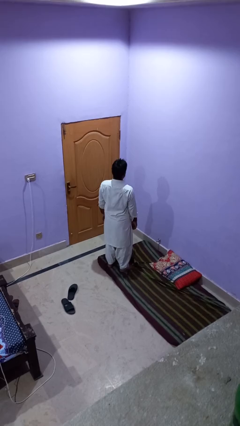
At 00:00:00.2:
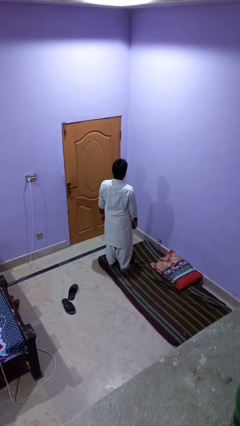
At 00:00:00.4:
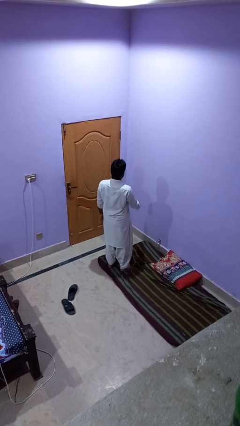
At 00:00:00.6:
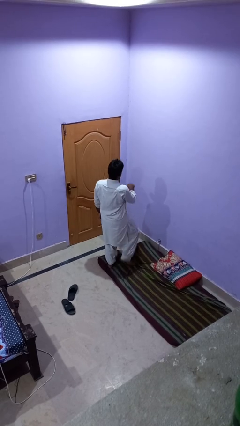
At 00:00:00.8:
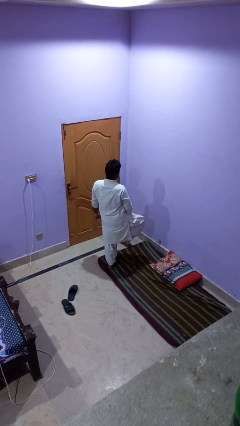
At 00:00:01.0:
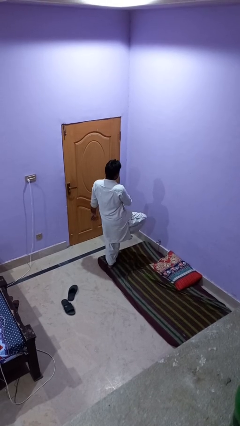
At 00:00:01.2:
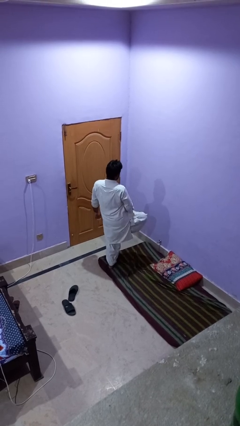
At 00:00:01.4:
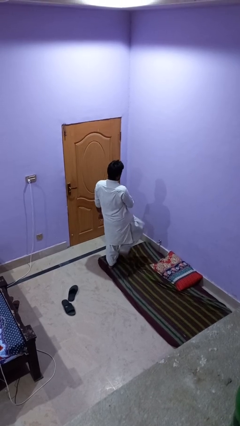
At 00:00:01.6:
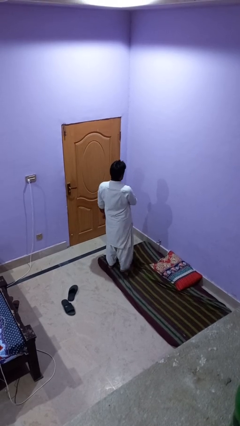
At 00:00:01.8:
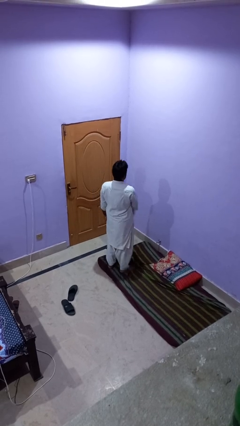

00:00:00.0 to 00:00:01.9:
person slaps hands on thighs

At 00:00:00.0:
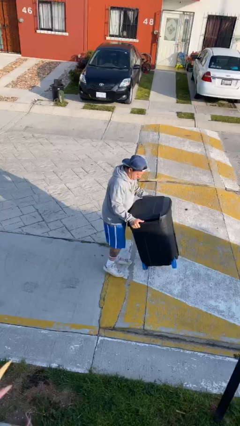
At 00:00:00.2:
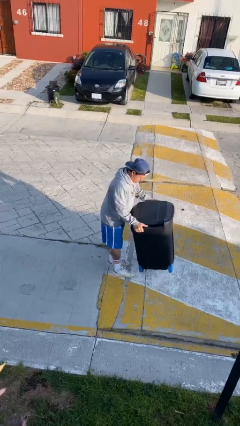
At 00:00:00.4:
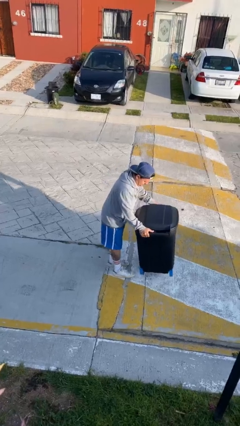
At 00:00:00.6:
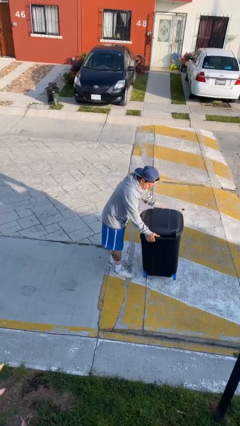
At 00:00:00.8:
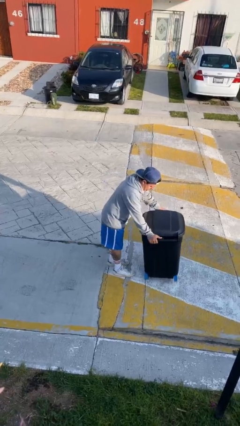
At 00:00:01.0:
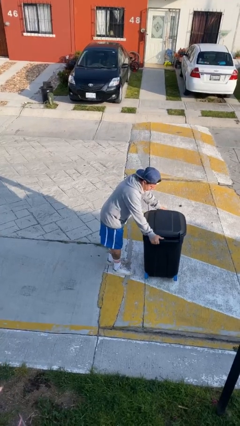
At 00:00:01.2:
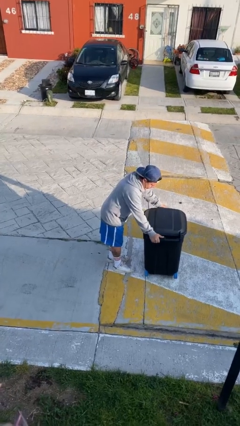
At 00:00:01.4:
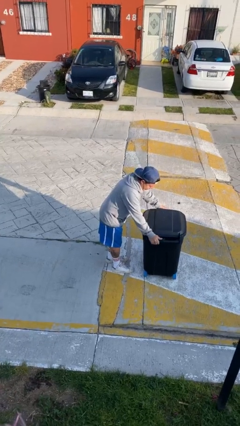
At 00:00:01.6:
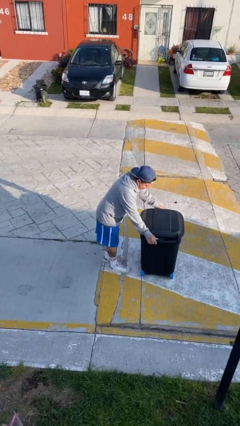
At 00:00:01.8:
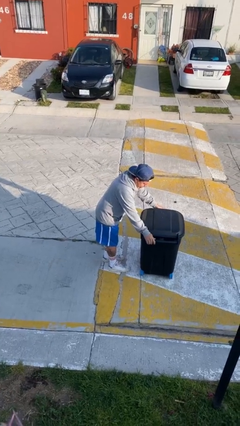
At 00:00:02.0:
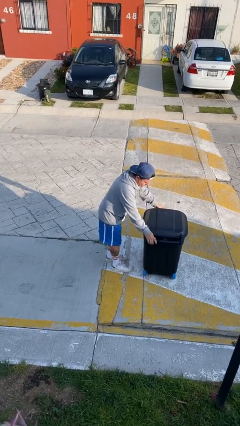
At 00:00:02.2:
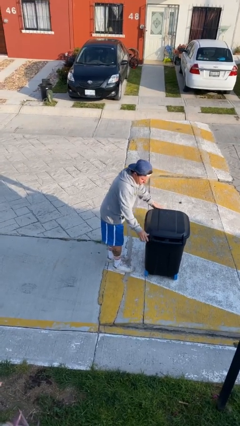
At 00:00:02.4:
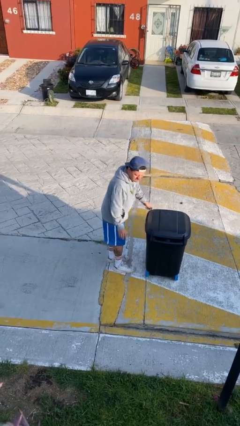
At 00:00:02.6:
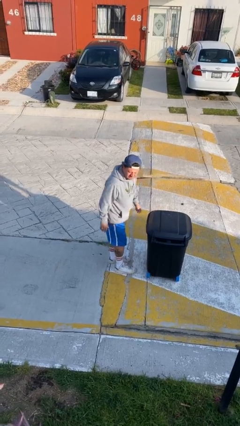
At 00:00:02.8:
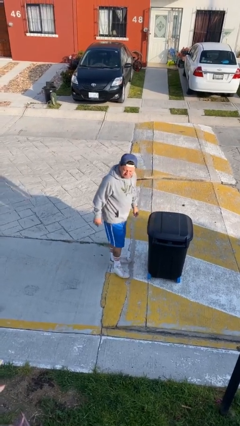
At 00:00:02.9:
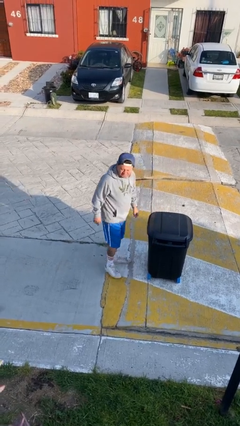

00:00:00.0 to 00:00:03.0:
person puts down object on floor

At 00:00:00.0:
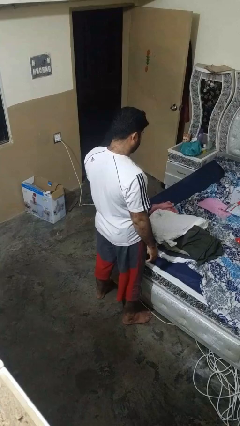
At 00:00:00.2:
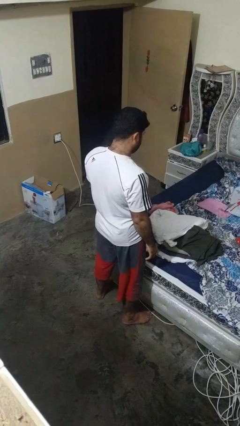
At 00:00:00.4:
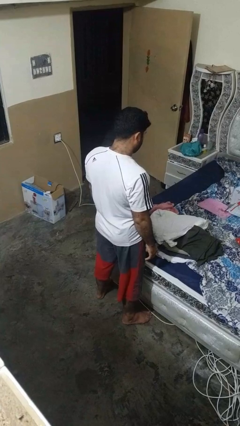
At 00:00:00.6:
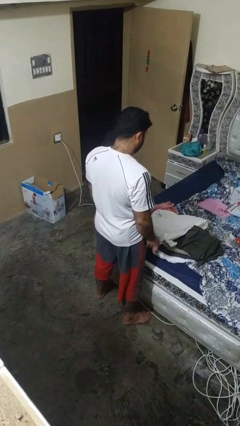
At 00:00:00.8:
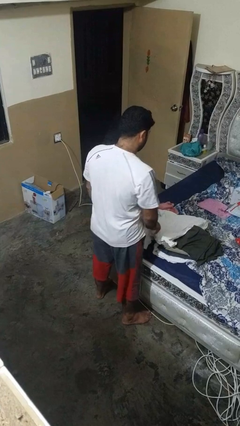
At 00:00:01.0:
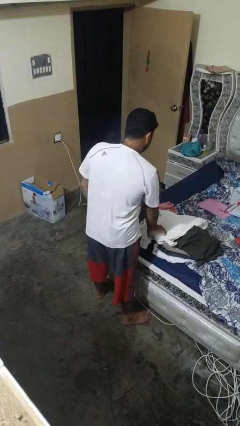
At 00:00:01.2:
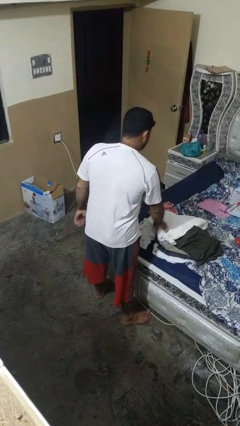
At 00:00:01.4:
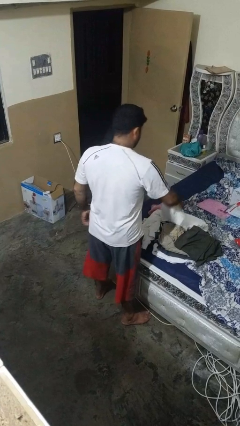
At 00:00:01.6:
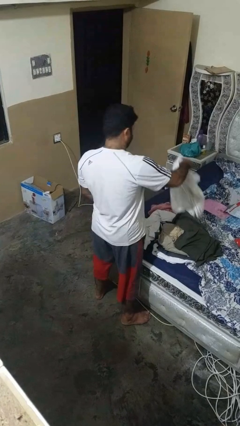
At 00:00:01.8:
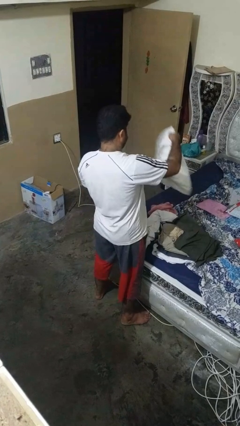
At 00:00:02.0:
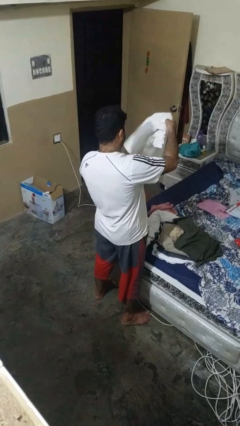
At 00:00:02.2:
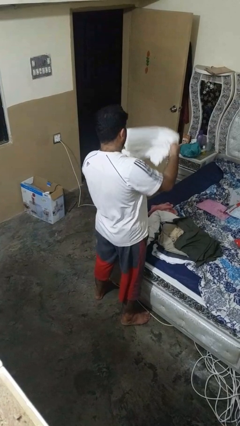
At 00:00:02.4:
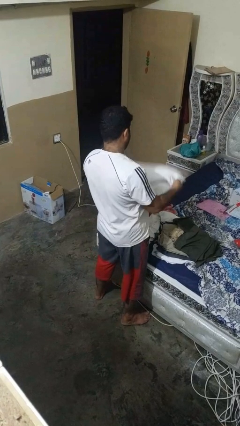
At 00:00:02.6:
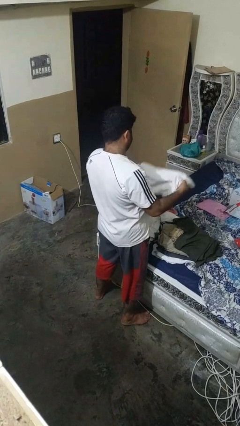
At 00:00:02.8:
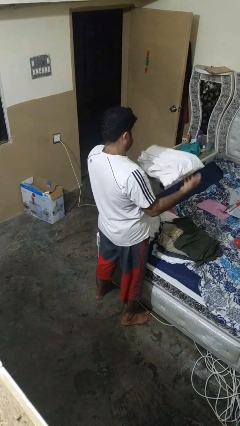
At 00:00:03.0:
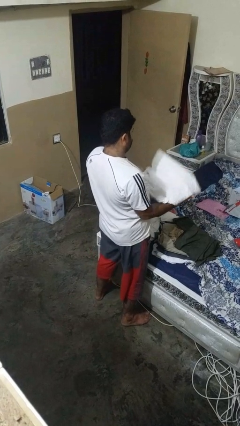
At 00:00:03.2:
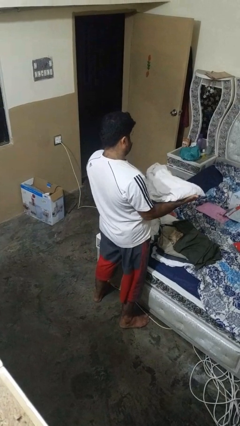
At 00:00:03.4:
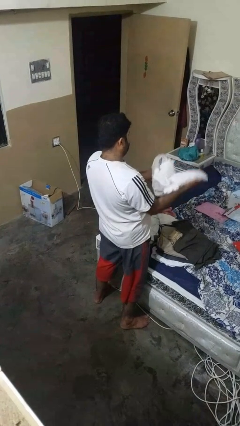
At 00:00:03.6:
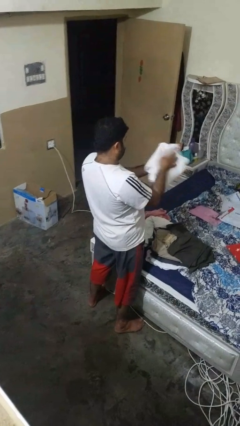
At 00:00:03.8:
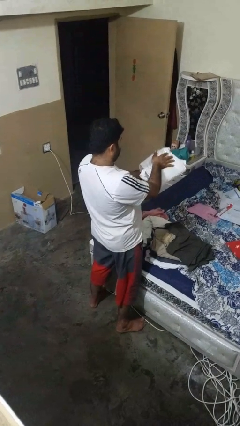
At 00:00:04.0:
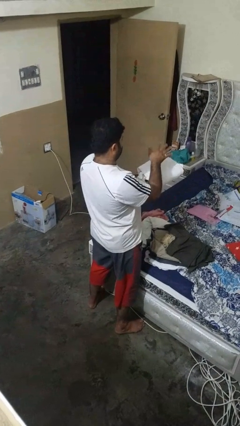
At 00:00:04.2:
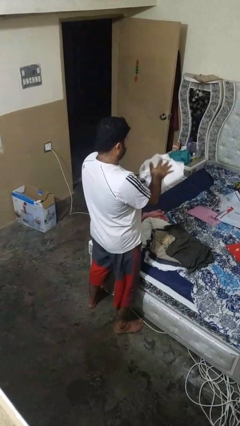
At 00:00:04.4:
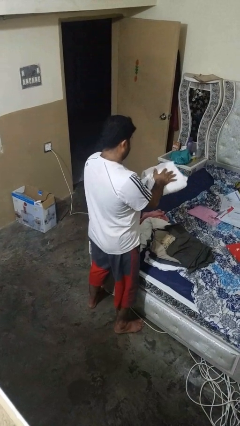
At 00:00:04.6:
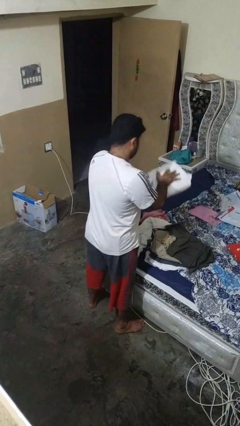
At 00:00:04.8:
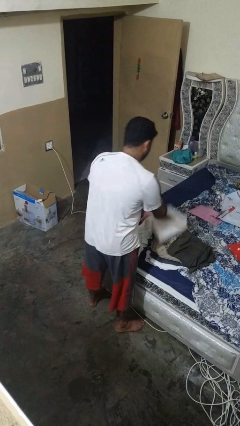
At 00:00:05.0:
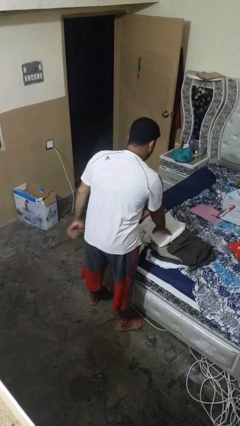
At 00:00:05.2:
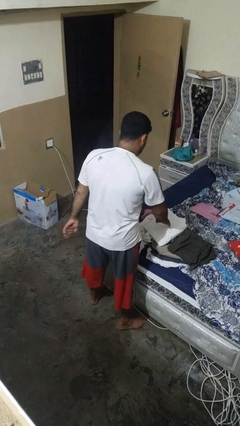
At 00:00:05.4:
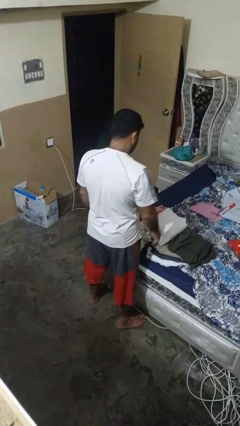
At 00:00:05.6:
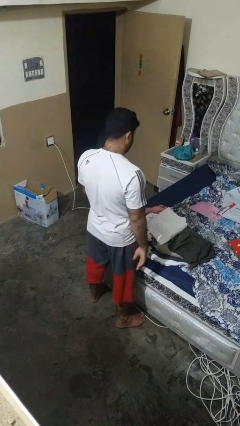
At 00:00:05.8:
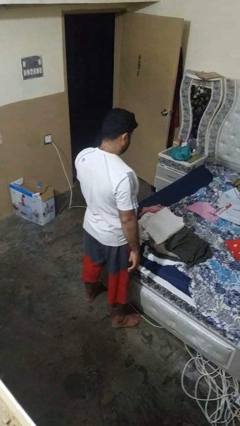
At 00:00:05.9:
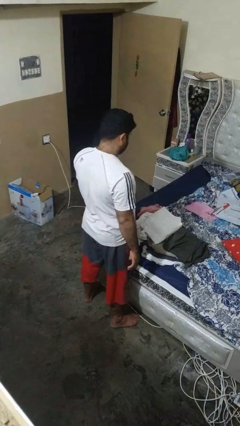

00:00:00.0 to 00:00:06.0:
person folds shirt

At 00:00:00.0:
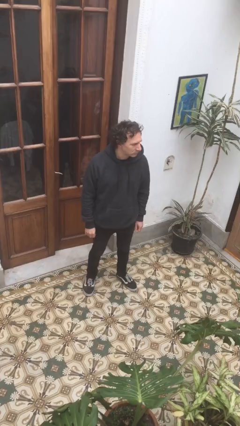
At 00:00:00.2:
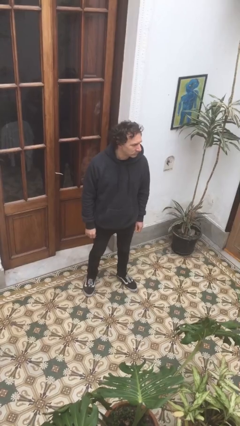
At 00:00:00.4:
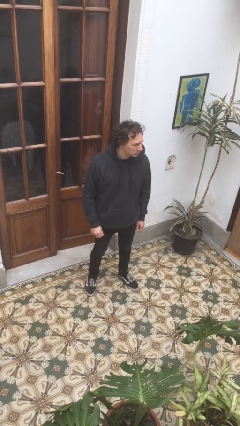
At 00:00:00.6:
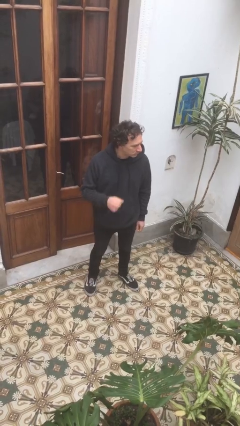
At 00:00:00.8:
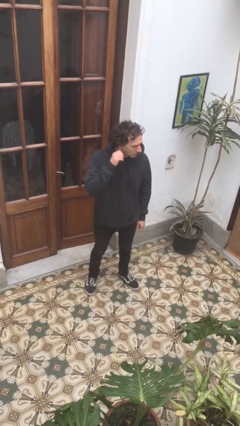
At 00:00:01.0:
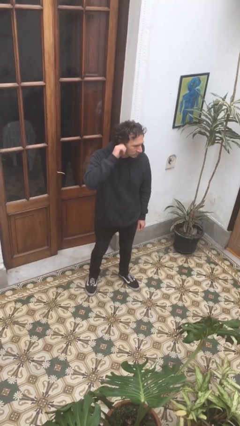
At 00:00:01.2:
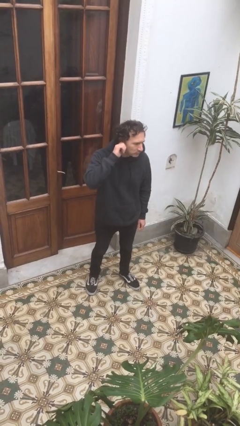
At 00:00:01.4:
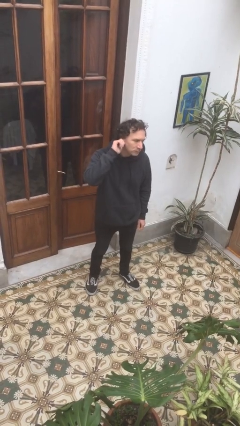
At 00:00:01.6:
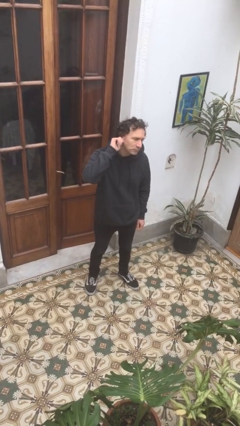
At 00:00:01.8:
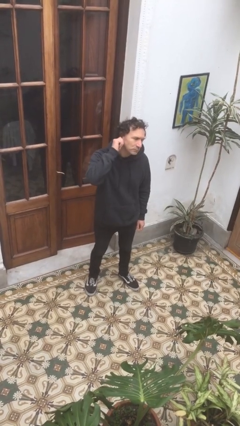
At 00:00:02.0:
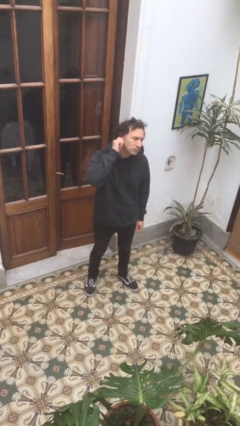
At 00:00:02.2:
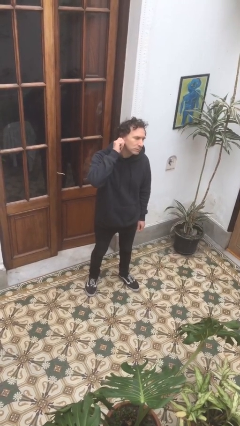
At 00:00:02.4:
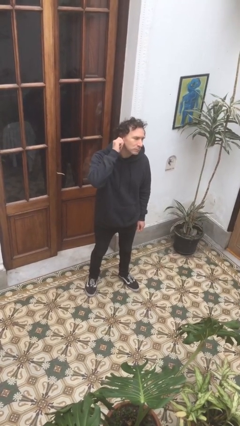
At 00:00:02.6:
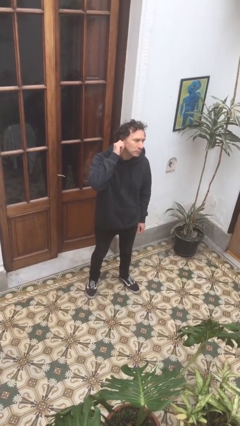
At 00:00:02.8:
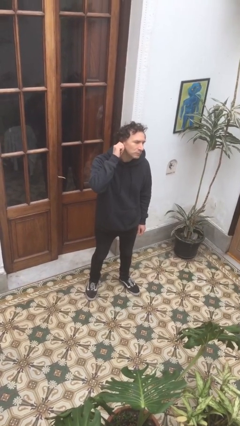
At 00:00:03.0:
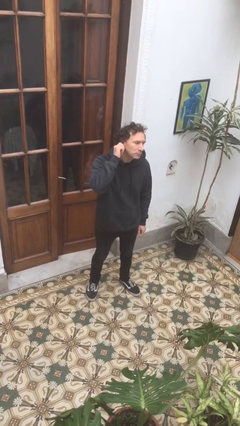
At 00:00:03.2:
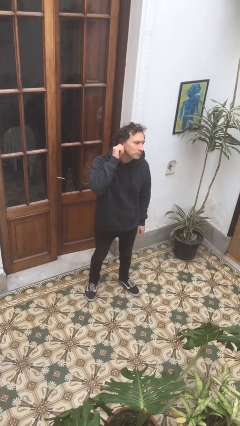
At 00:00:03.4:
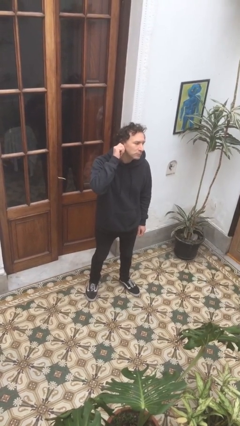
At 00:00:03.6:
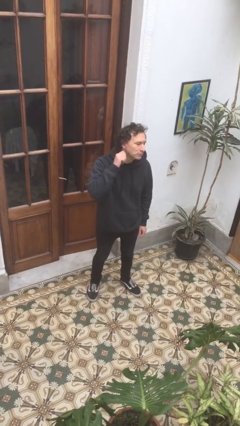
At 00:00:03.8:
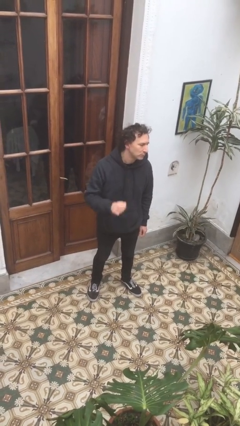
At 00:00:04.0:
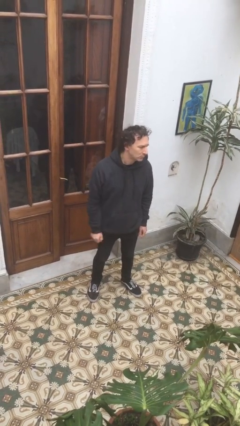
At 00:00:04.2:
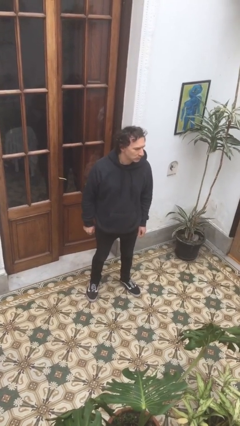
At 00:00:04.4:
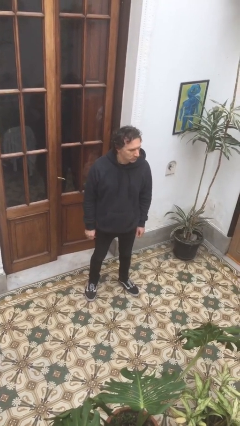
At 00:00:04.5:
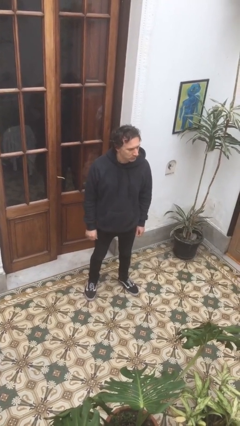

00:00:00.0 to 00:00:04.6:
person touches earlobe

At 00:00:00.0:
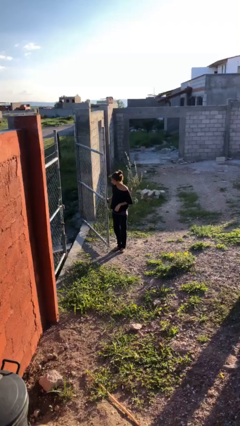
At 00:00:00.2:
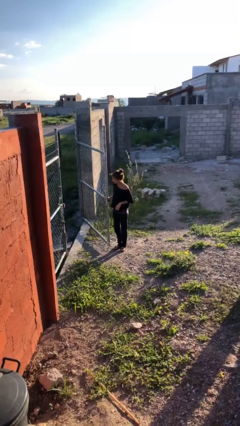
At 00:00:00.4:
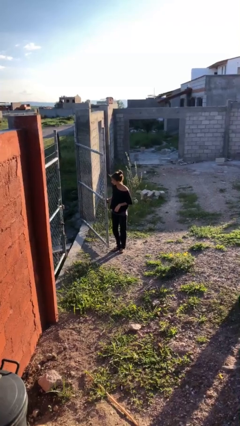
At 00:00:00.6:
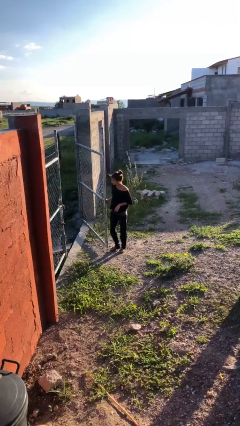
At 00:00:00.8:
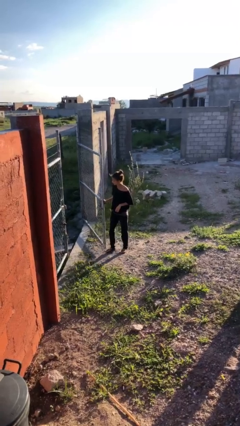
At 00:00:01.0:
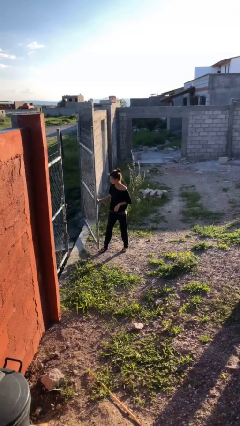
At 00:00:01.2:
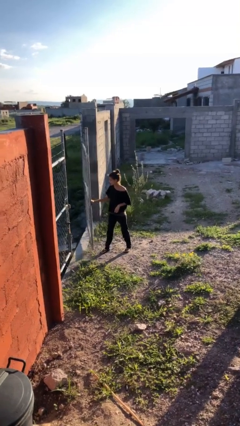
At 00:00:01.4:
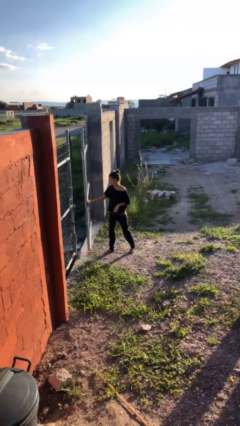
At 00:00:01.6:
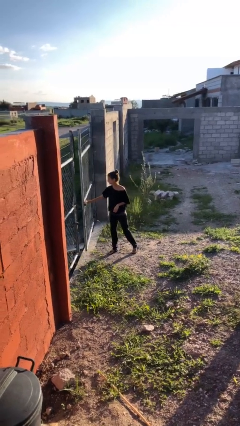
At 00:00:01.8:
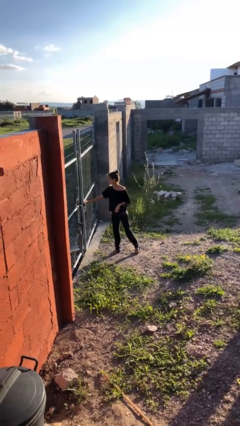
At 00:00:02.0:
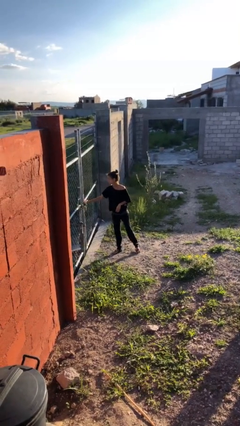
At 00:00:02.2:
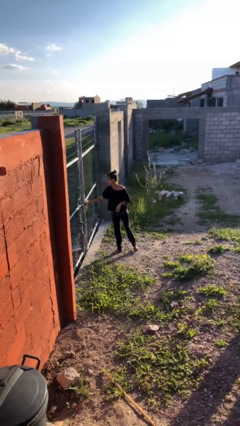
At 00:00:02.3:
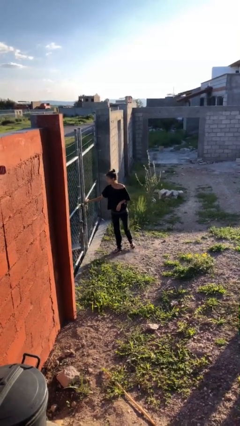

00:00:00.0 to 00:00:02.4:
person closes gate
